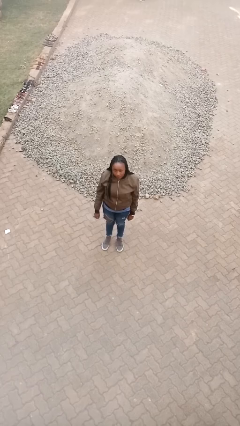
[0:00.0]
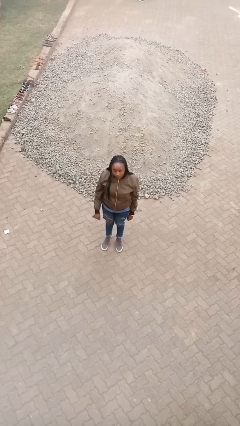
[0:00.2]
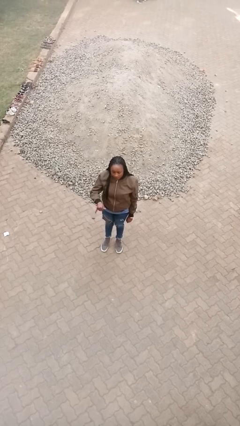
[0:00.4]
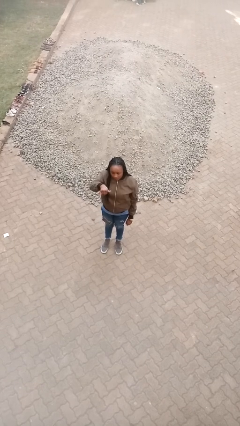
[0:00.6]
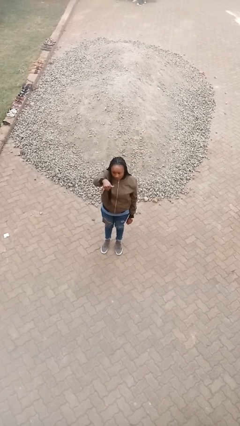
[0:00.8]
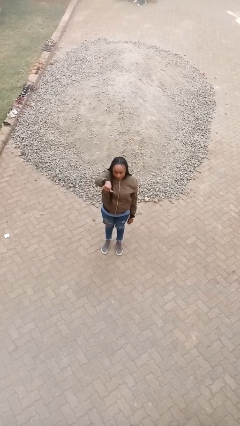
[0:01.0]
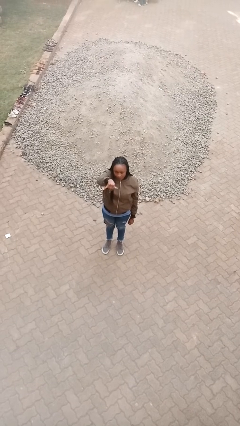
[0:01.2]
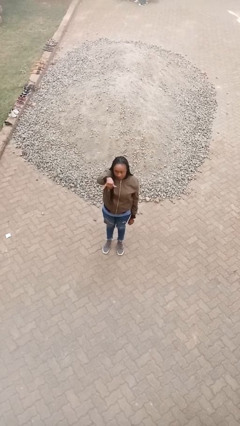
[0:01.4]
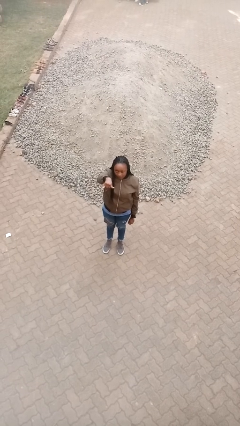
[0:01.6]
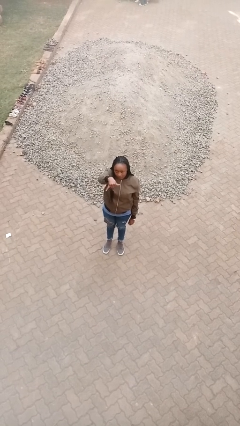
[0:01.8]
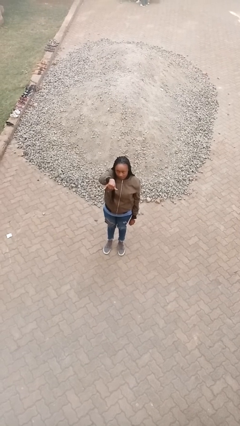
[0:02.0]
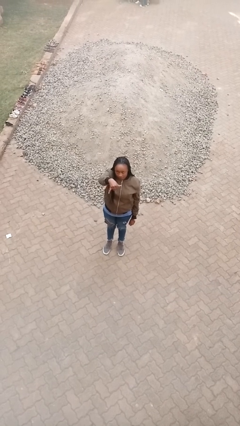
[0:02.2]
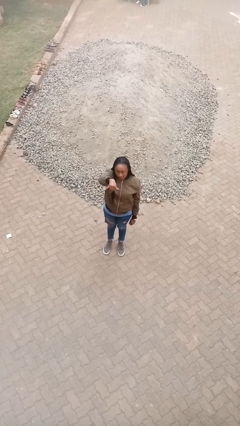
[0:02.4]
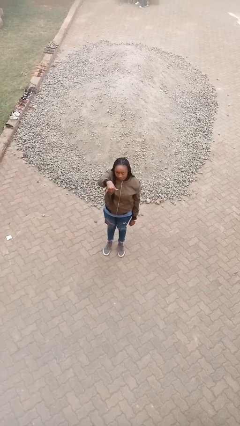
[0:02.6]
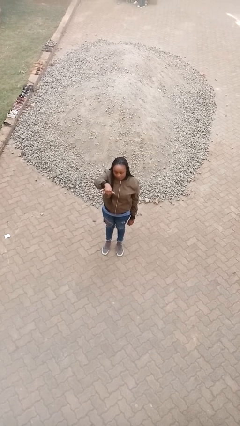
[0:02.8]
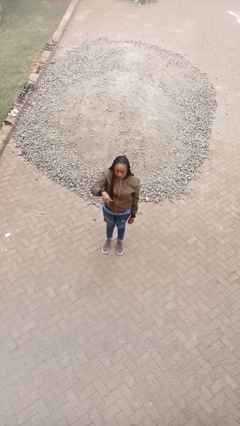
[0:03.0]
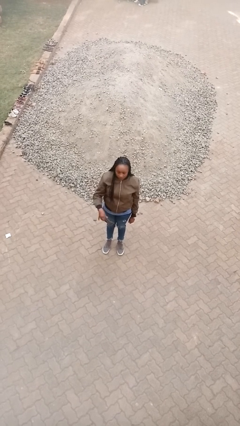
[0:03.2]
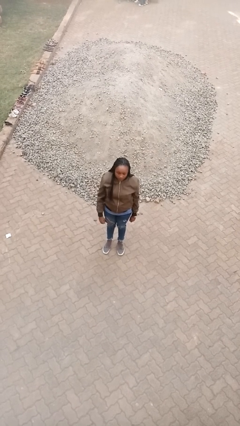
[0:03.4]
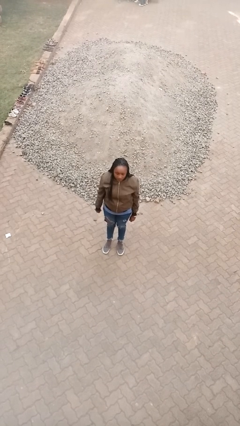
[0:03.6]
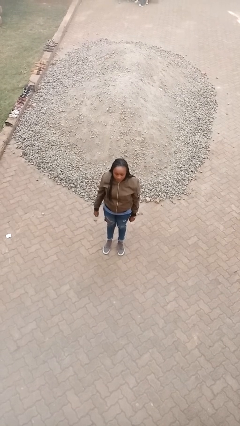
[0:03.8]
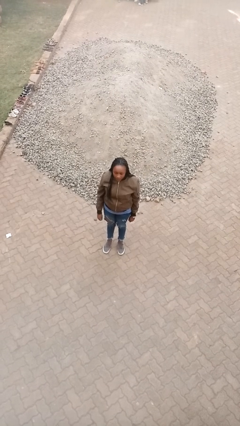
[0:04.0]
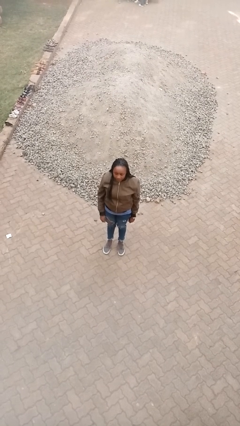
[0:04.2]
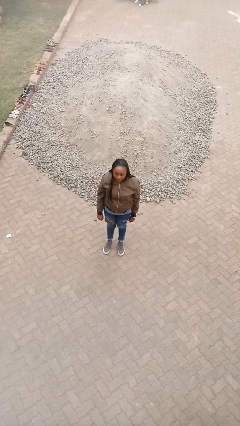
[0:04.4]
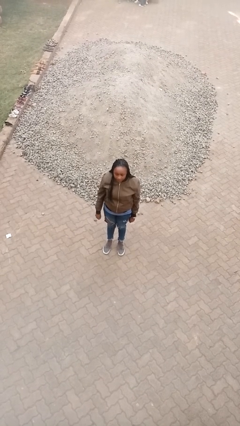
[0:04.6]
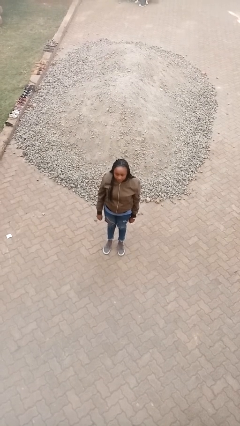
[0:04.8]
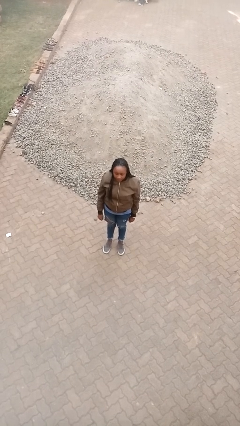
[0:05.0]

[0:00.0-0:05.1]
person gestures hang loose

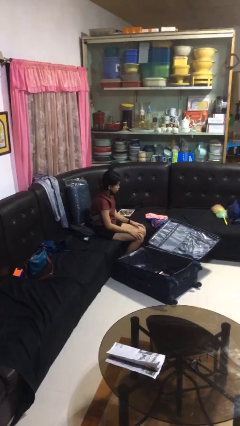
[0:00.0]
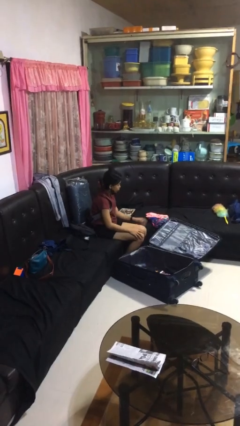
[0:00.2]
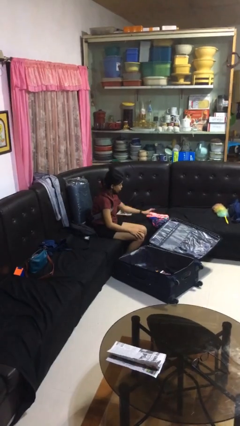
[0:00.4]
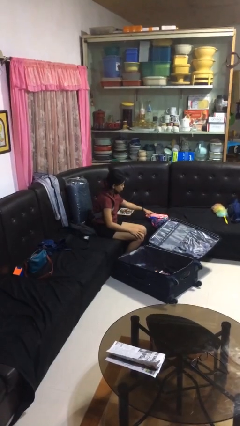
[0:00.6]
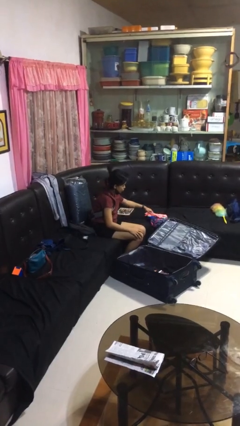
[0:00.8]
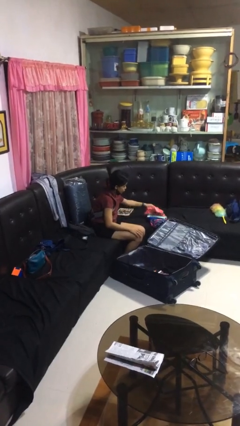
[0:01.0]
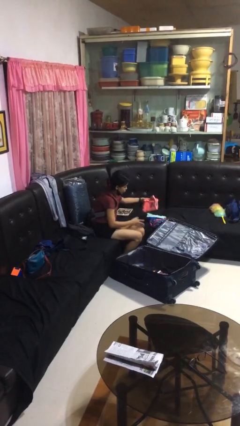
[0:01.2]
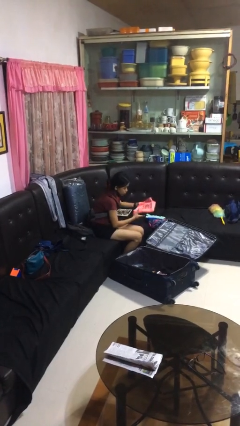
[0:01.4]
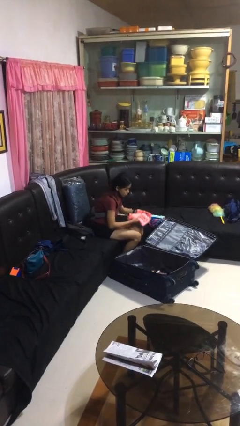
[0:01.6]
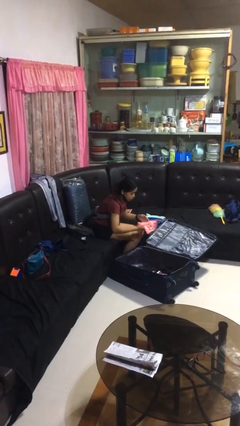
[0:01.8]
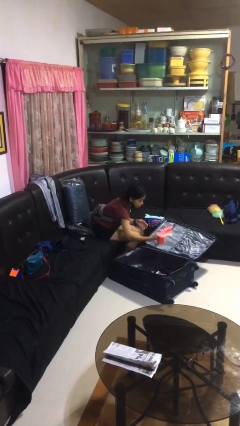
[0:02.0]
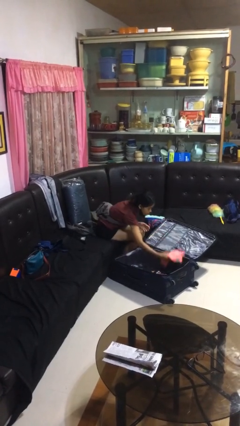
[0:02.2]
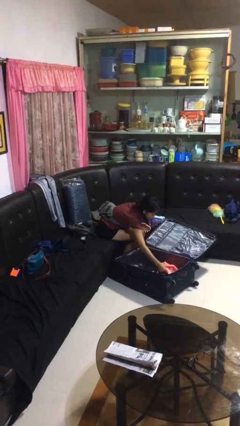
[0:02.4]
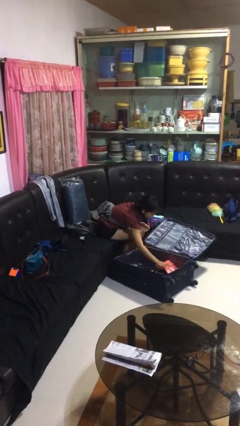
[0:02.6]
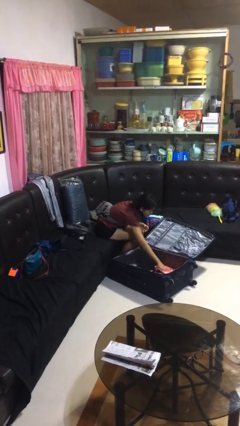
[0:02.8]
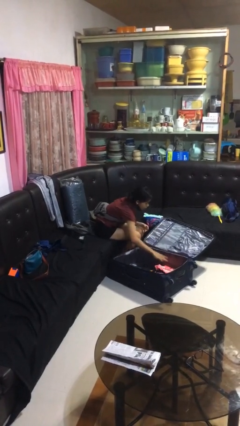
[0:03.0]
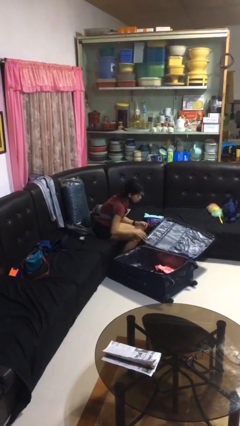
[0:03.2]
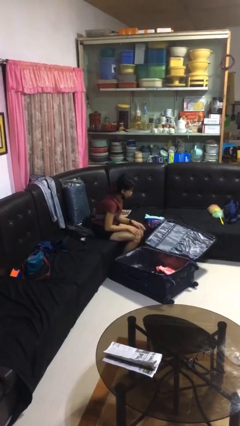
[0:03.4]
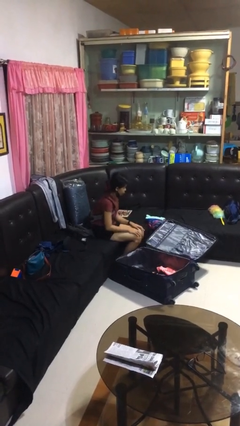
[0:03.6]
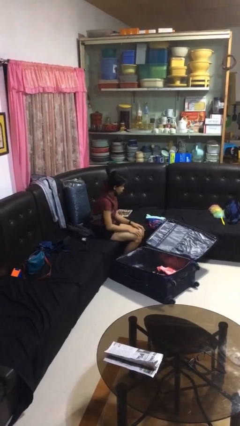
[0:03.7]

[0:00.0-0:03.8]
person loads clothes into suitcase

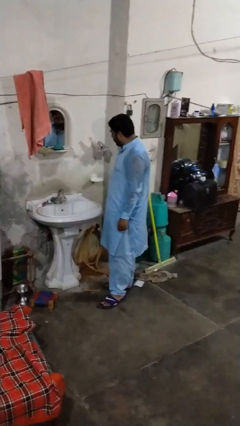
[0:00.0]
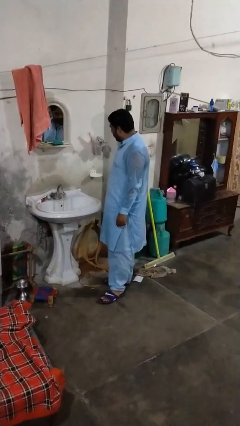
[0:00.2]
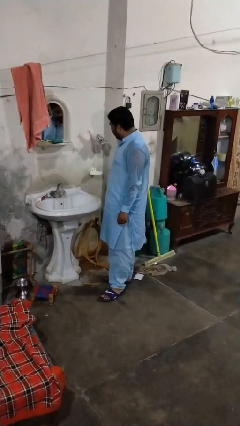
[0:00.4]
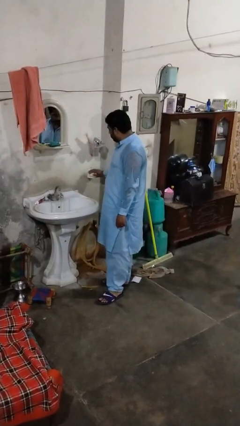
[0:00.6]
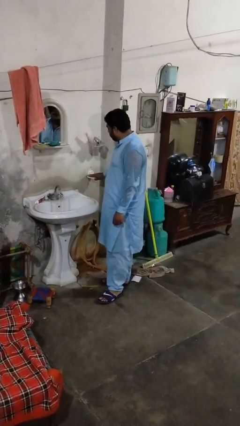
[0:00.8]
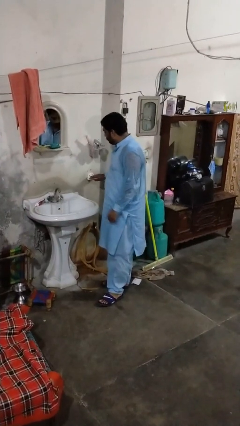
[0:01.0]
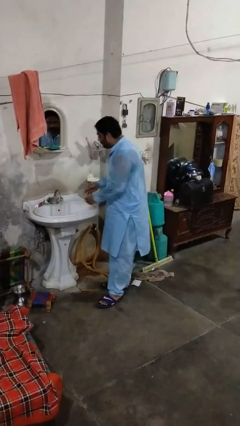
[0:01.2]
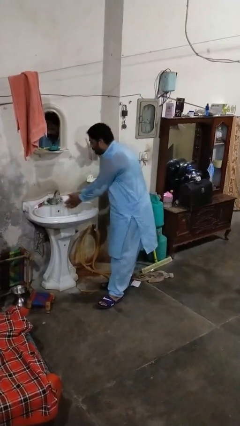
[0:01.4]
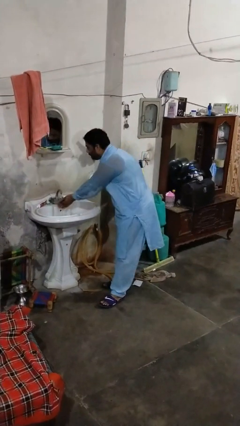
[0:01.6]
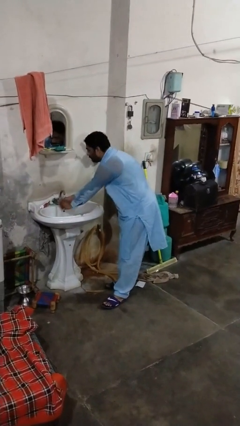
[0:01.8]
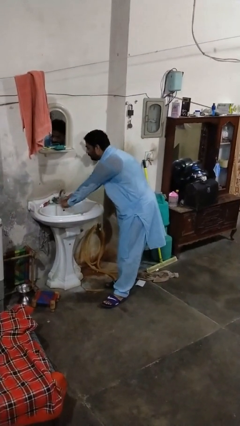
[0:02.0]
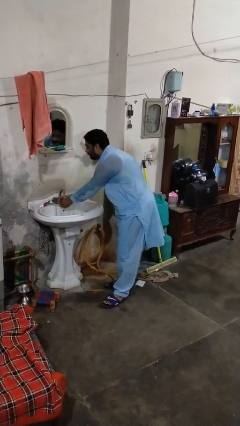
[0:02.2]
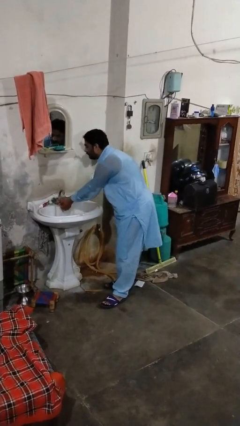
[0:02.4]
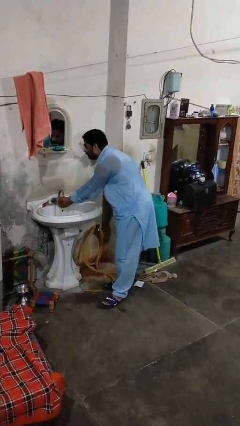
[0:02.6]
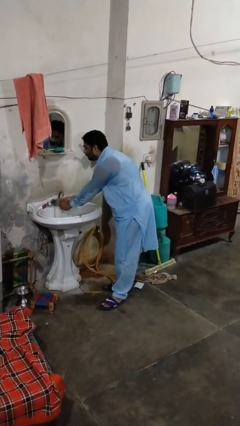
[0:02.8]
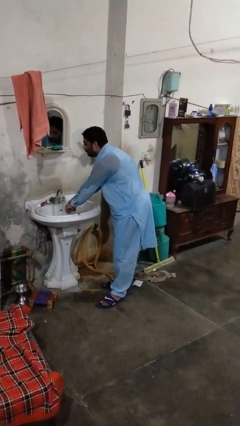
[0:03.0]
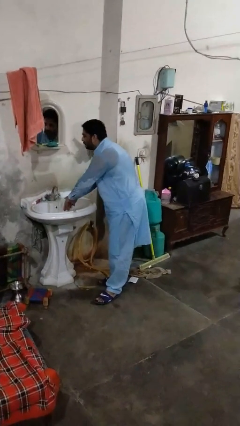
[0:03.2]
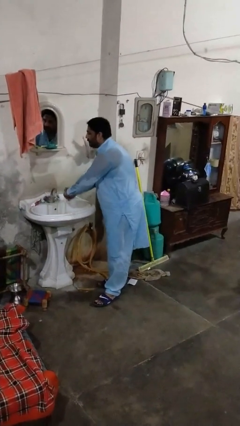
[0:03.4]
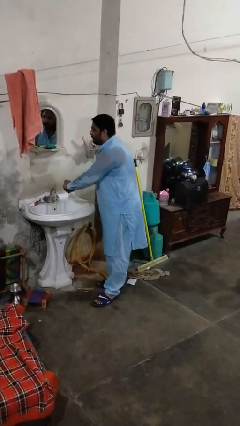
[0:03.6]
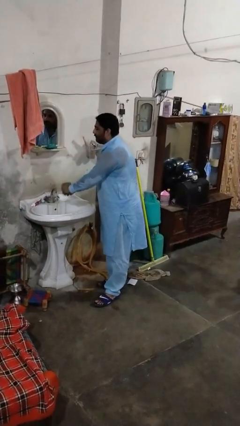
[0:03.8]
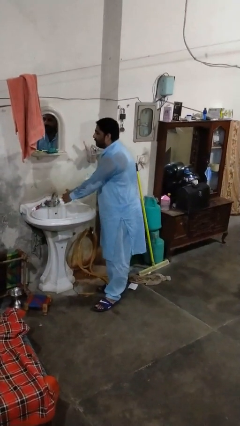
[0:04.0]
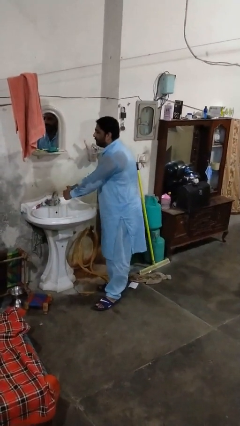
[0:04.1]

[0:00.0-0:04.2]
person washes hands

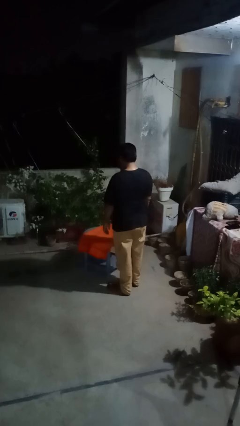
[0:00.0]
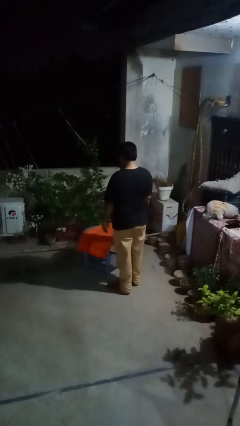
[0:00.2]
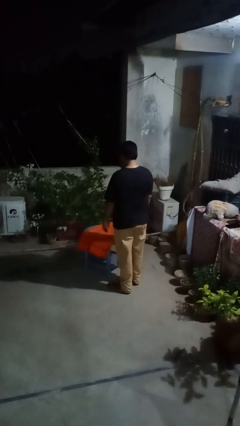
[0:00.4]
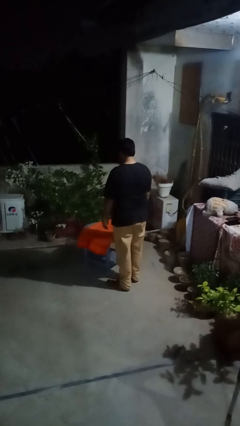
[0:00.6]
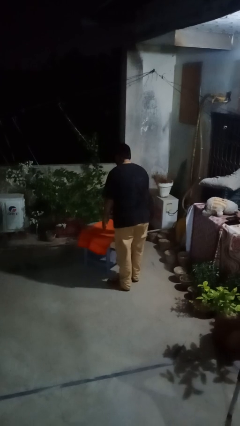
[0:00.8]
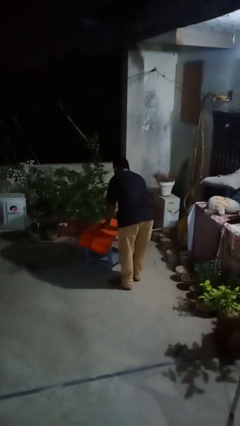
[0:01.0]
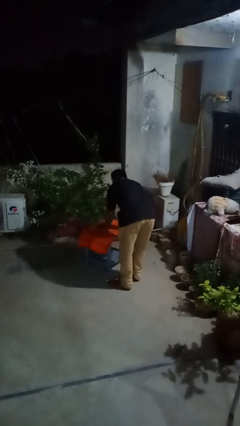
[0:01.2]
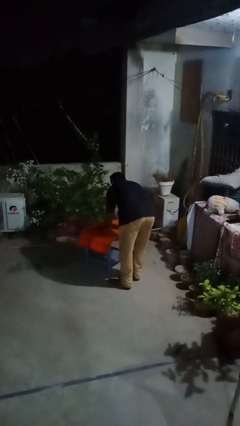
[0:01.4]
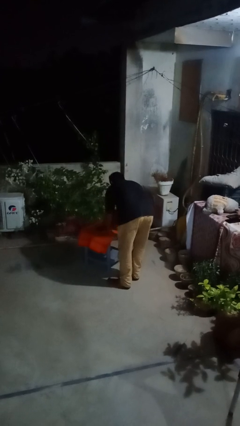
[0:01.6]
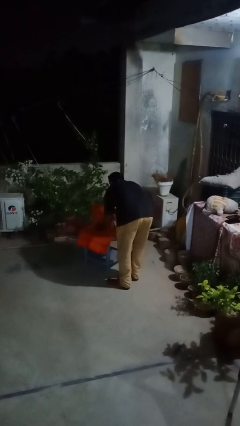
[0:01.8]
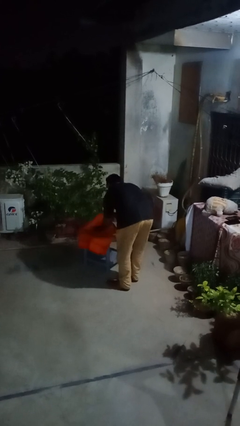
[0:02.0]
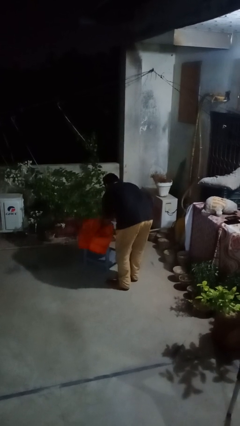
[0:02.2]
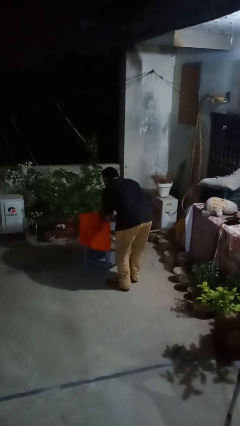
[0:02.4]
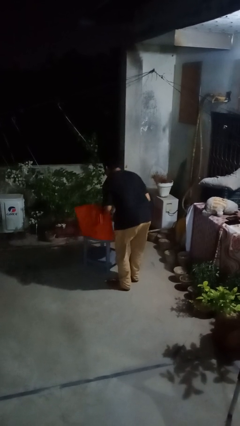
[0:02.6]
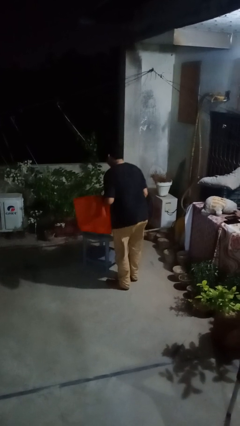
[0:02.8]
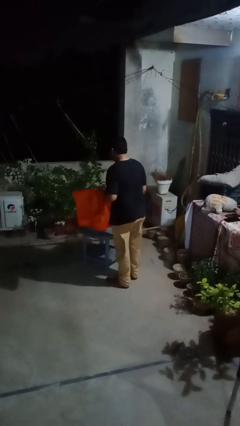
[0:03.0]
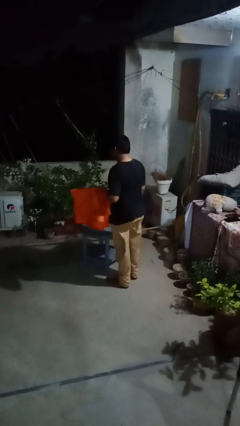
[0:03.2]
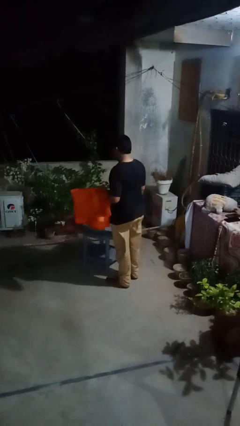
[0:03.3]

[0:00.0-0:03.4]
person folds tablecloth

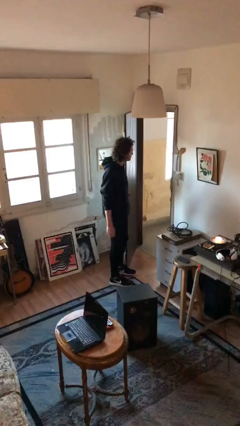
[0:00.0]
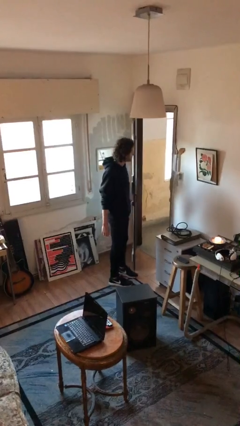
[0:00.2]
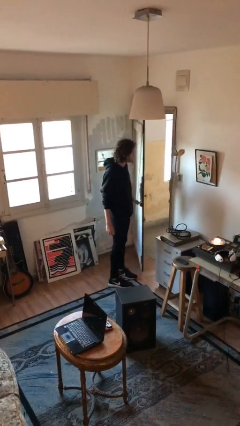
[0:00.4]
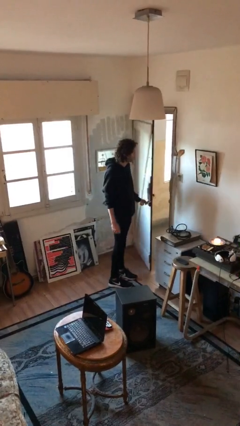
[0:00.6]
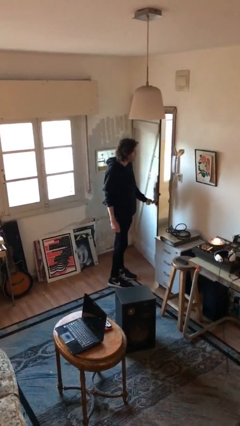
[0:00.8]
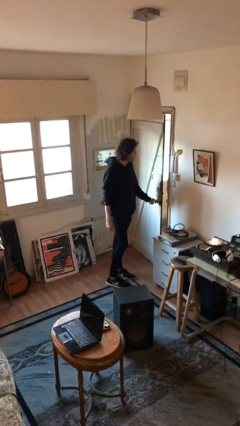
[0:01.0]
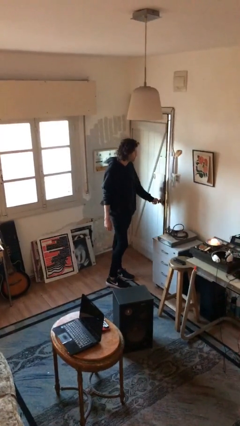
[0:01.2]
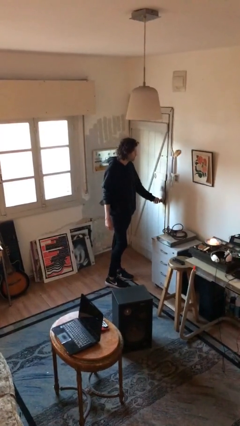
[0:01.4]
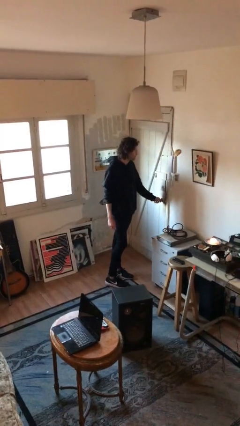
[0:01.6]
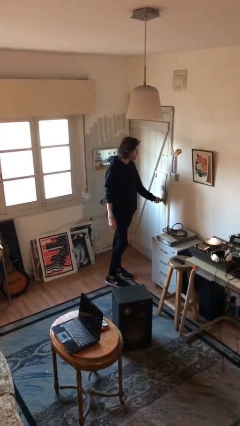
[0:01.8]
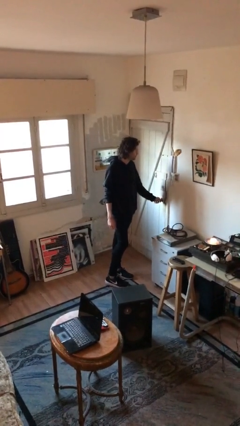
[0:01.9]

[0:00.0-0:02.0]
person closes facility door
